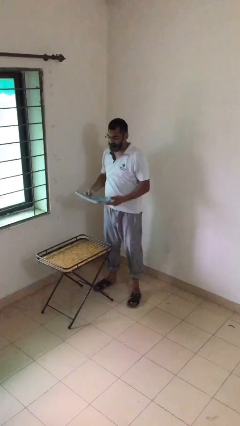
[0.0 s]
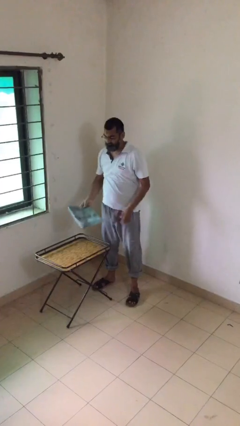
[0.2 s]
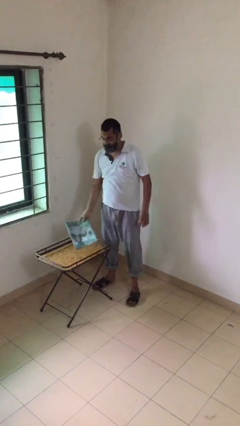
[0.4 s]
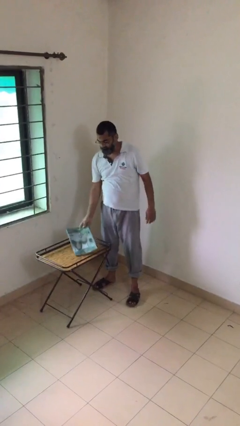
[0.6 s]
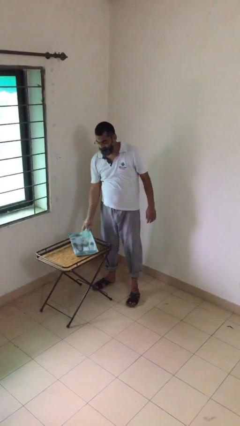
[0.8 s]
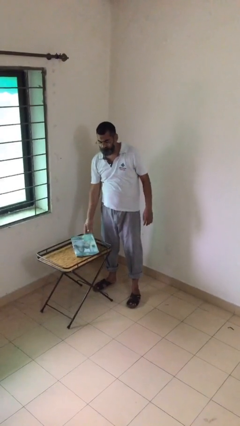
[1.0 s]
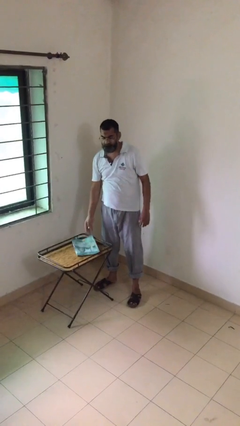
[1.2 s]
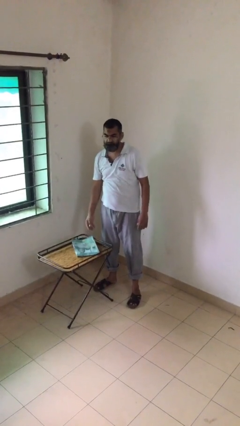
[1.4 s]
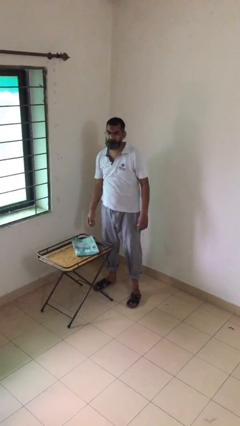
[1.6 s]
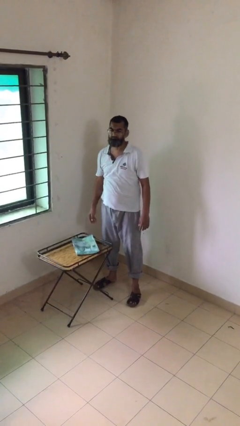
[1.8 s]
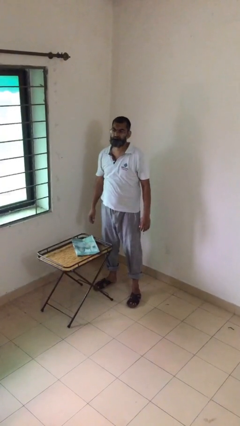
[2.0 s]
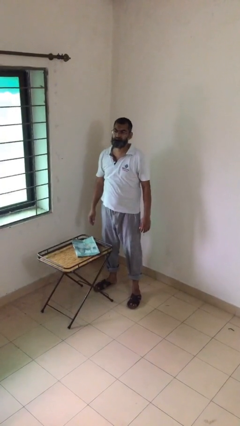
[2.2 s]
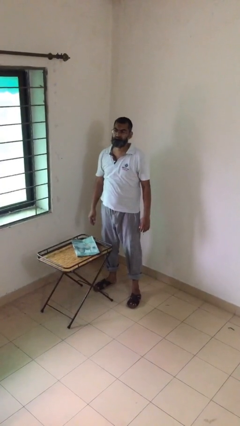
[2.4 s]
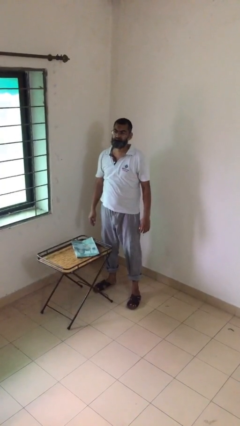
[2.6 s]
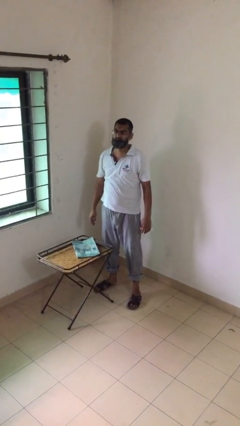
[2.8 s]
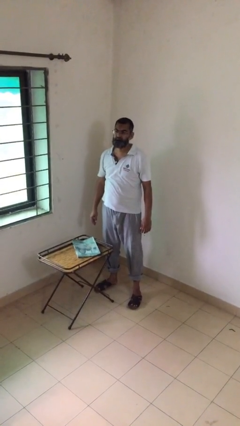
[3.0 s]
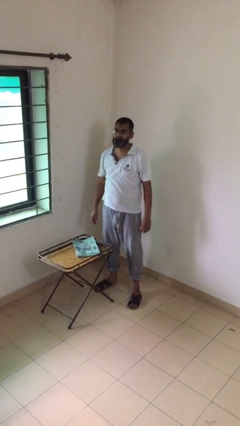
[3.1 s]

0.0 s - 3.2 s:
person puts down object on table

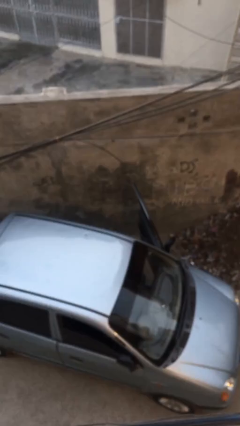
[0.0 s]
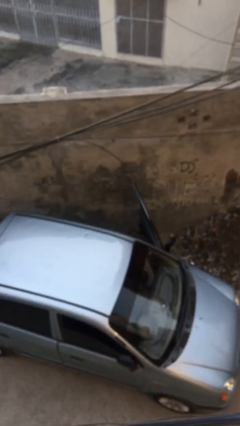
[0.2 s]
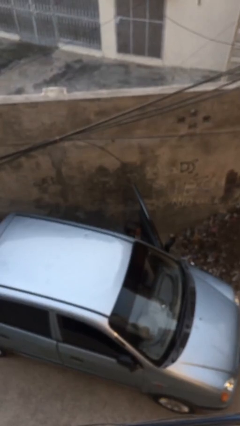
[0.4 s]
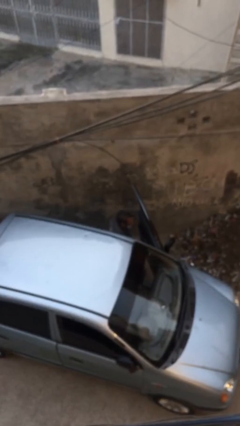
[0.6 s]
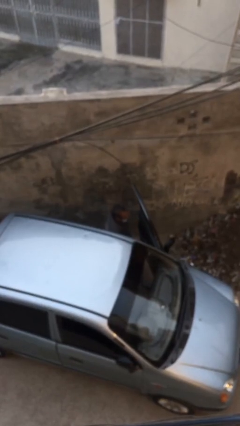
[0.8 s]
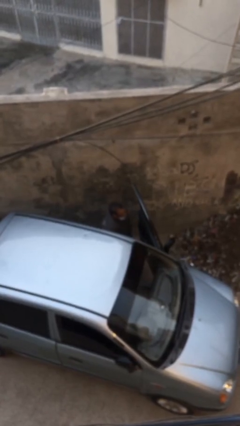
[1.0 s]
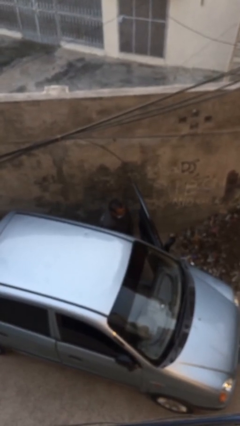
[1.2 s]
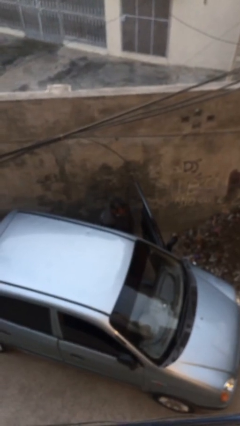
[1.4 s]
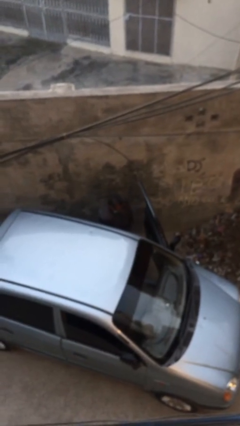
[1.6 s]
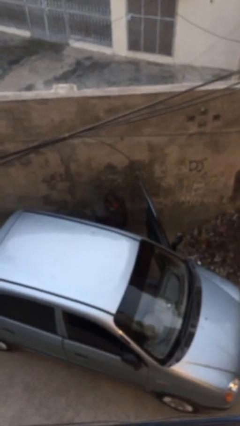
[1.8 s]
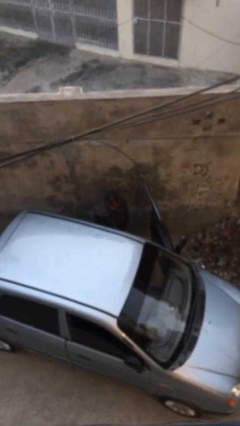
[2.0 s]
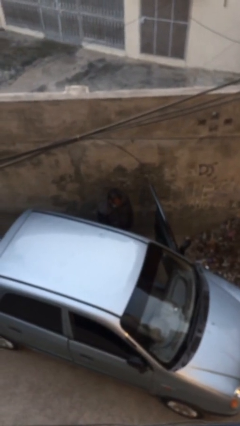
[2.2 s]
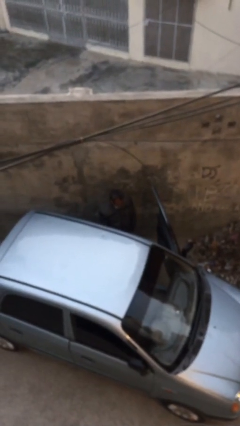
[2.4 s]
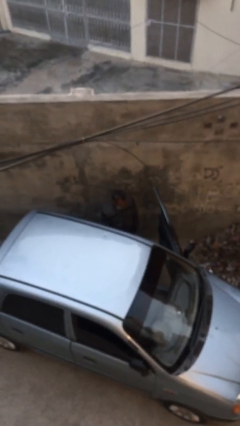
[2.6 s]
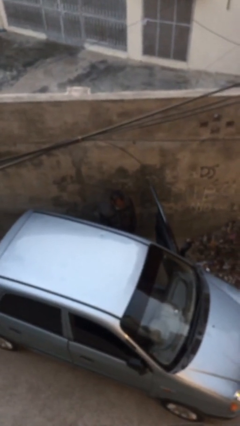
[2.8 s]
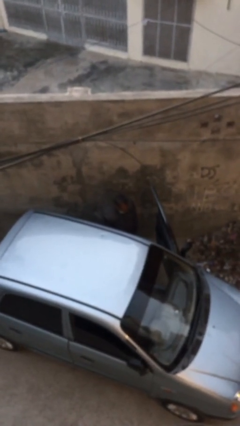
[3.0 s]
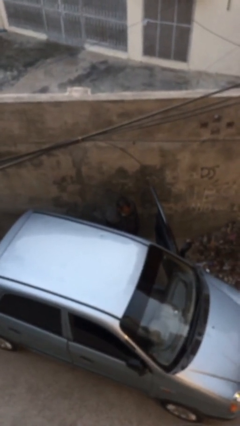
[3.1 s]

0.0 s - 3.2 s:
person exits car

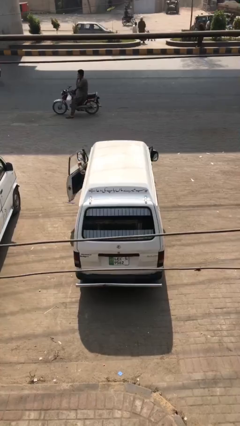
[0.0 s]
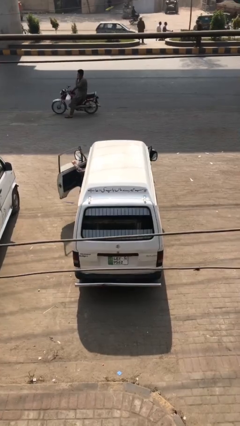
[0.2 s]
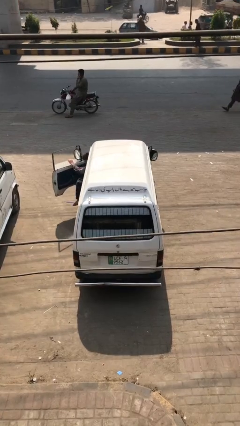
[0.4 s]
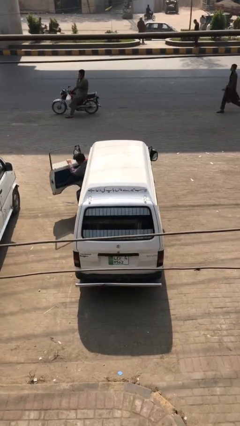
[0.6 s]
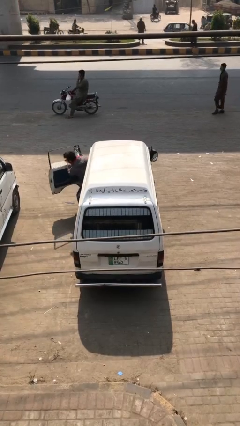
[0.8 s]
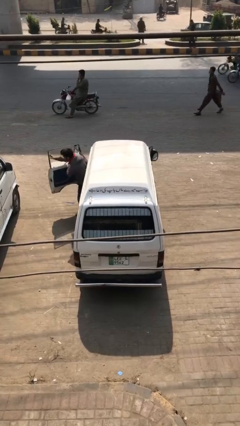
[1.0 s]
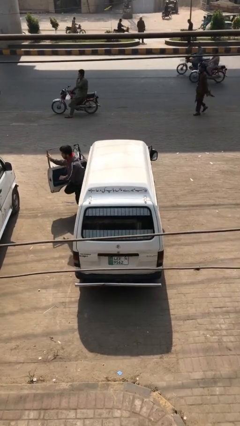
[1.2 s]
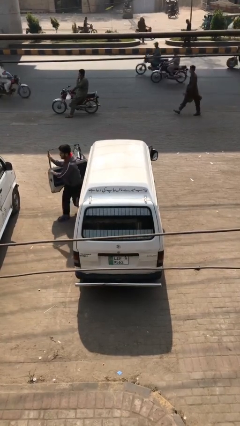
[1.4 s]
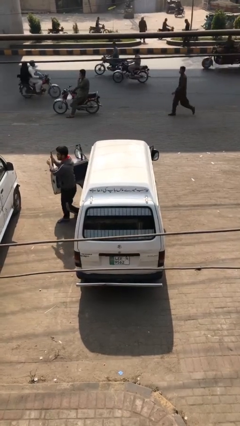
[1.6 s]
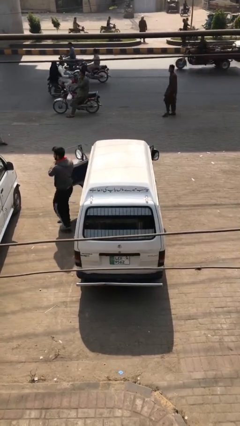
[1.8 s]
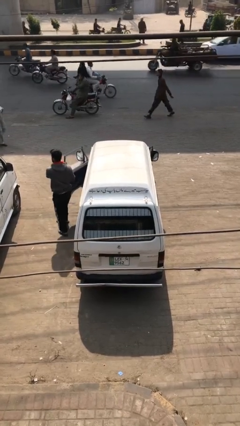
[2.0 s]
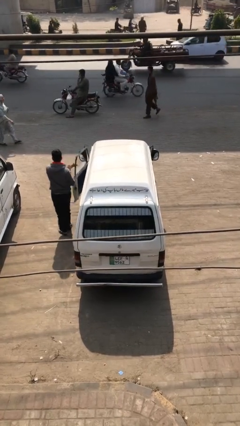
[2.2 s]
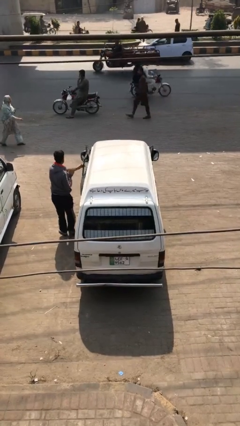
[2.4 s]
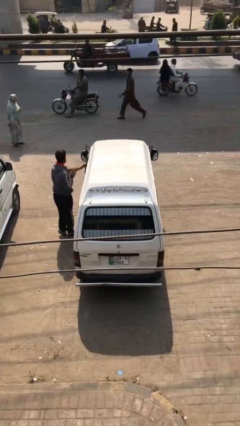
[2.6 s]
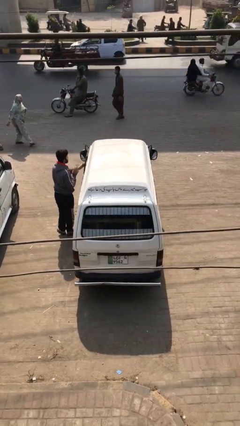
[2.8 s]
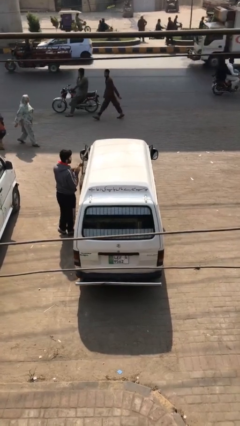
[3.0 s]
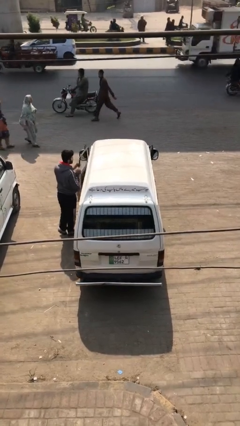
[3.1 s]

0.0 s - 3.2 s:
car drops off person

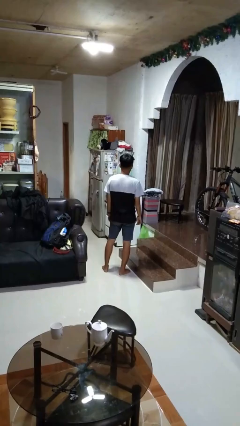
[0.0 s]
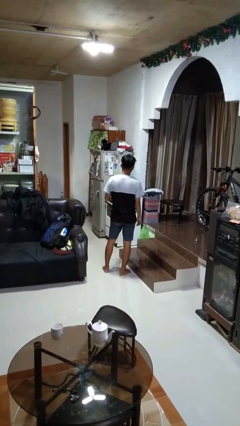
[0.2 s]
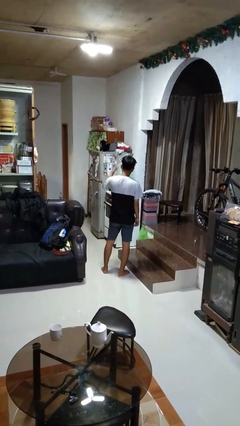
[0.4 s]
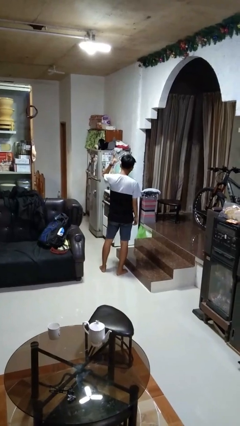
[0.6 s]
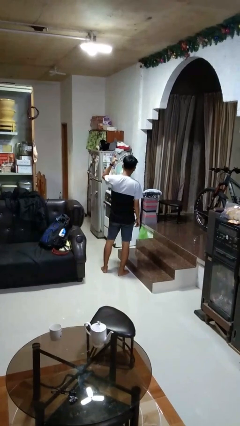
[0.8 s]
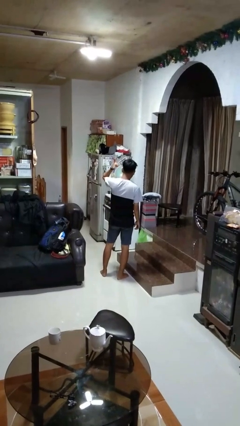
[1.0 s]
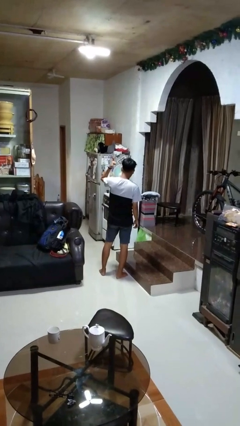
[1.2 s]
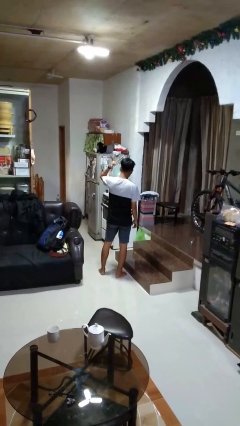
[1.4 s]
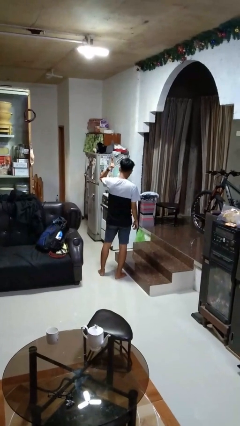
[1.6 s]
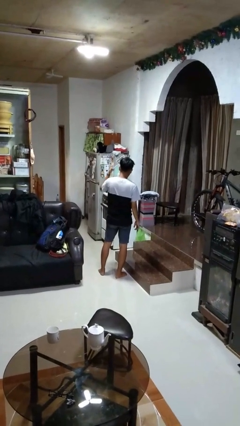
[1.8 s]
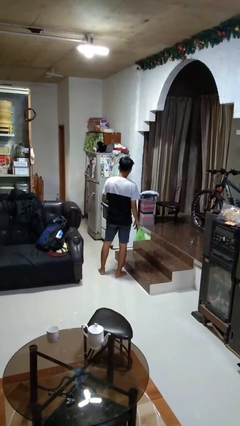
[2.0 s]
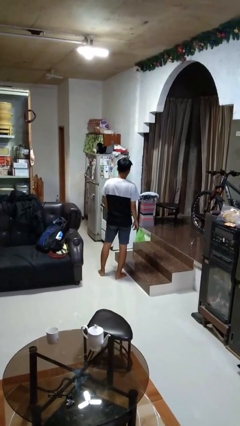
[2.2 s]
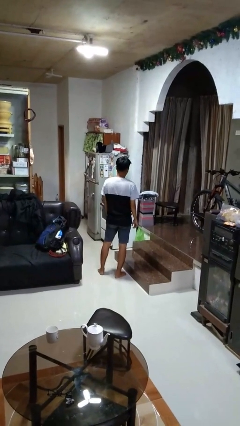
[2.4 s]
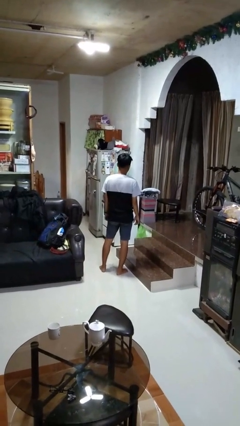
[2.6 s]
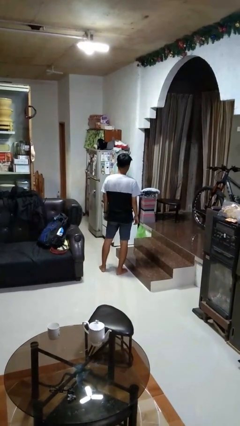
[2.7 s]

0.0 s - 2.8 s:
person gestures behind me

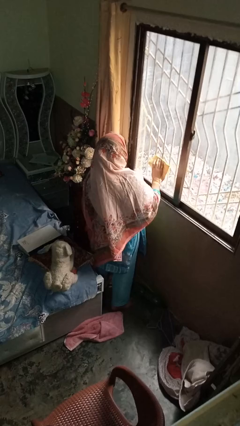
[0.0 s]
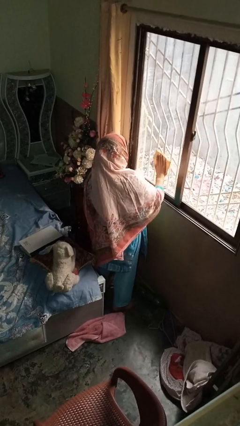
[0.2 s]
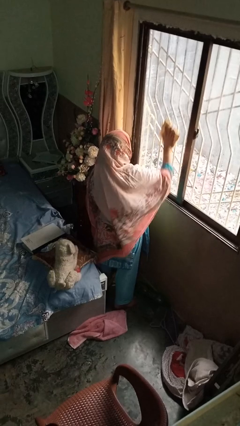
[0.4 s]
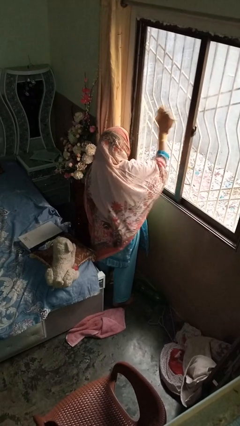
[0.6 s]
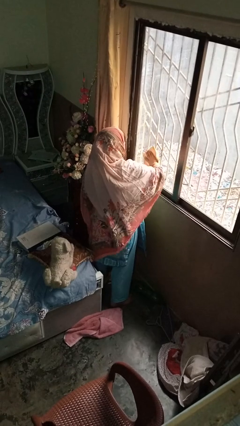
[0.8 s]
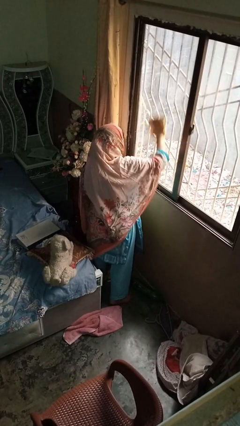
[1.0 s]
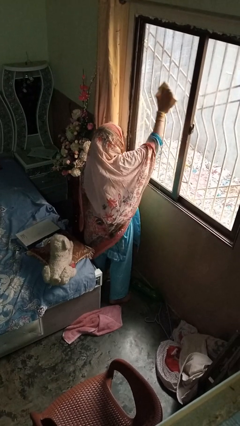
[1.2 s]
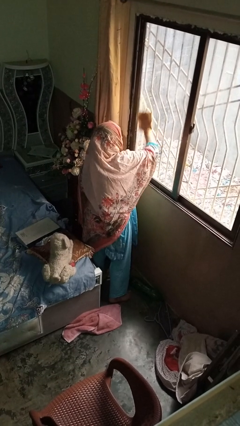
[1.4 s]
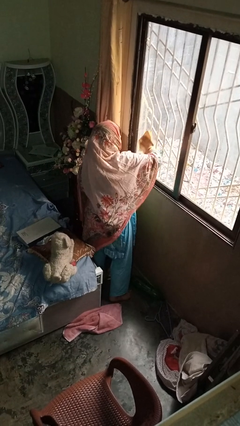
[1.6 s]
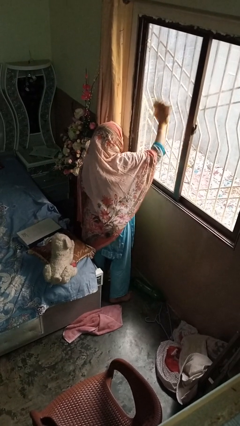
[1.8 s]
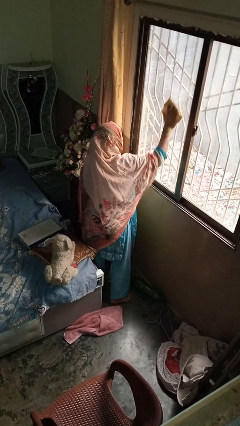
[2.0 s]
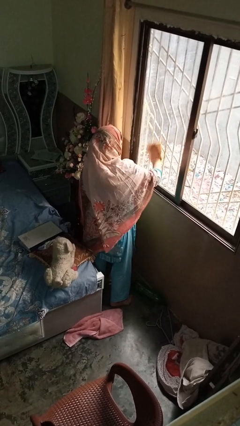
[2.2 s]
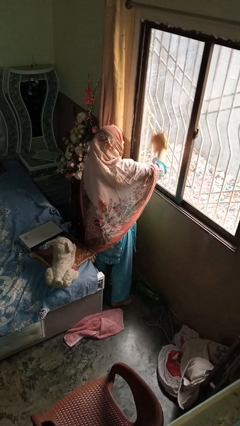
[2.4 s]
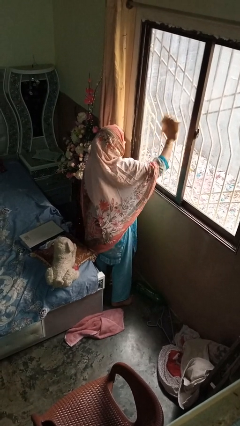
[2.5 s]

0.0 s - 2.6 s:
person washes window

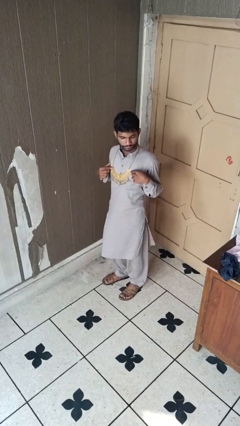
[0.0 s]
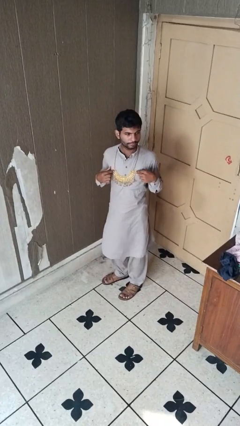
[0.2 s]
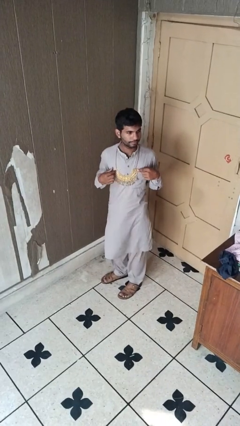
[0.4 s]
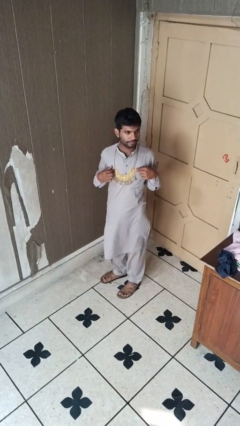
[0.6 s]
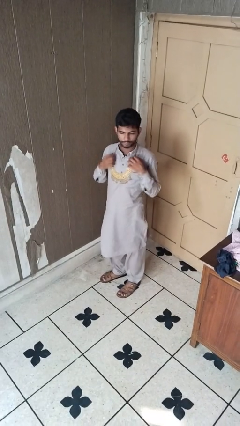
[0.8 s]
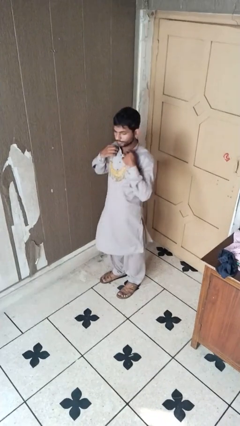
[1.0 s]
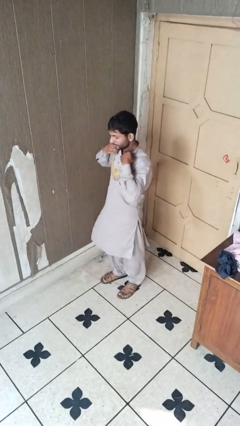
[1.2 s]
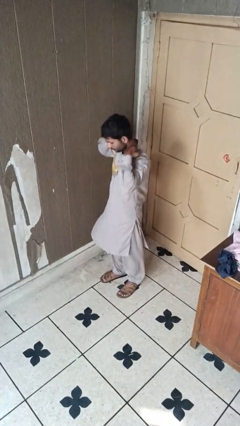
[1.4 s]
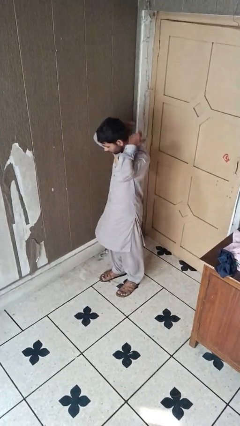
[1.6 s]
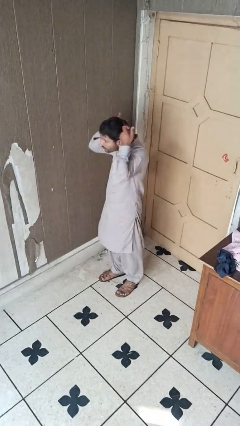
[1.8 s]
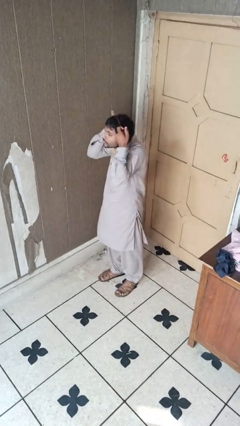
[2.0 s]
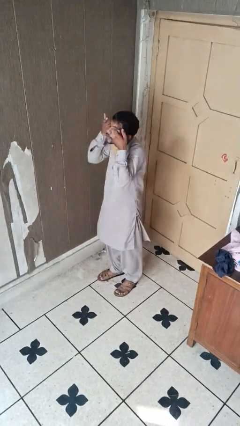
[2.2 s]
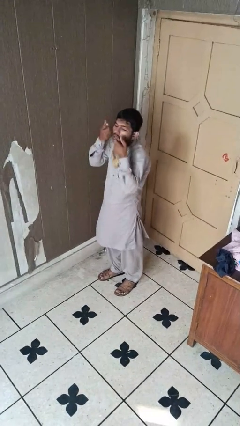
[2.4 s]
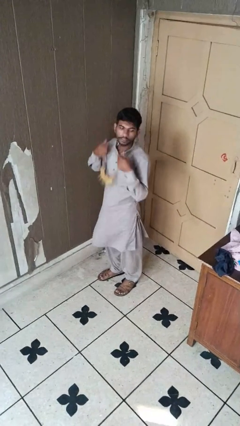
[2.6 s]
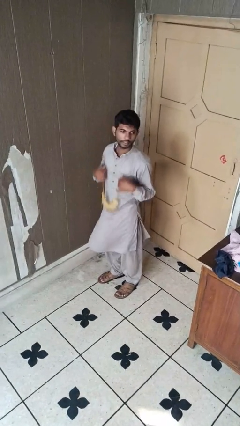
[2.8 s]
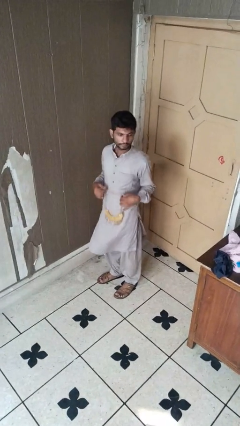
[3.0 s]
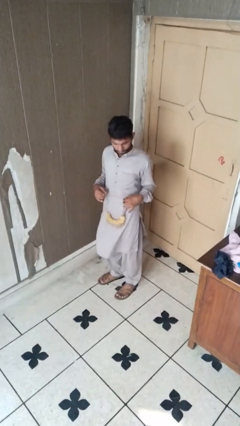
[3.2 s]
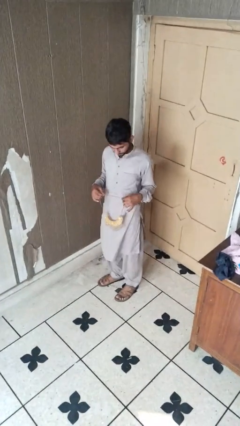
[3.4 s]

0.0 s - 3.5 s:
person takes off necklace
